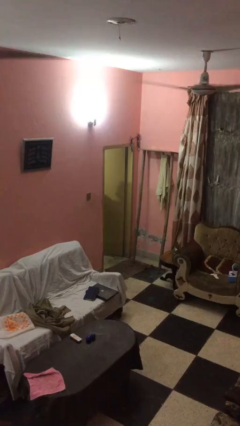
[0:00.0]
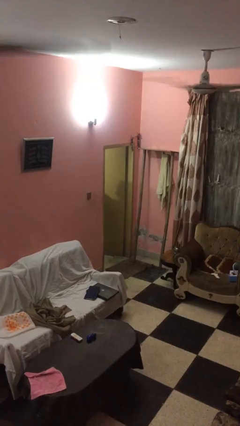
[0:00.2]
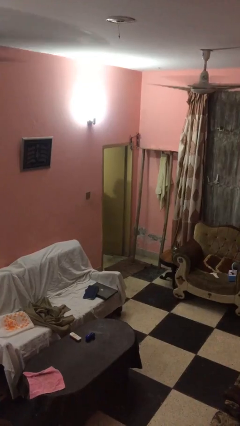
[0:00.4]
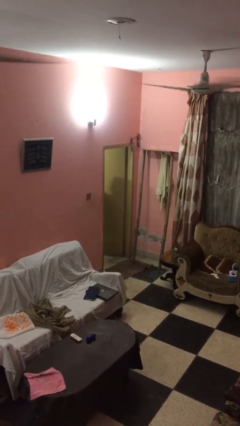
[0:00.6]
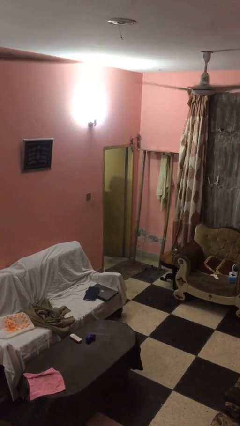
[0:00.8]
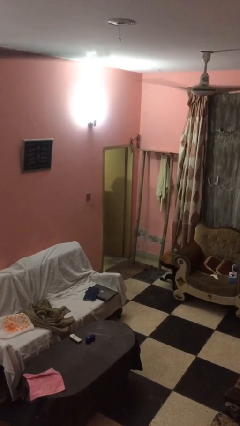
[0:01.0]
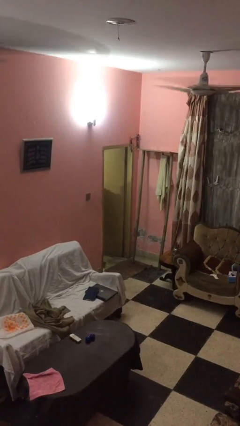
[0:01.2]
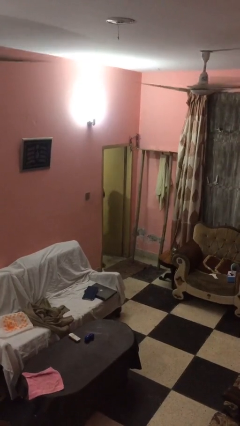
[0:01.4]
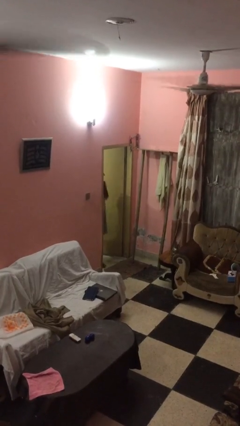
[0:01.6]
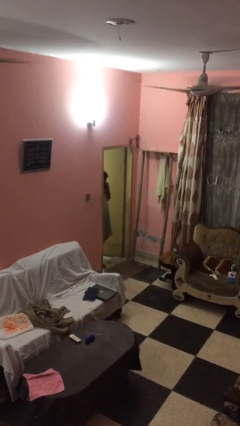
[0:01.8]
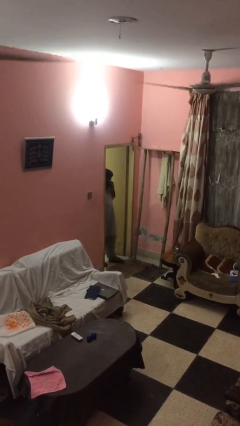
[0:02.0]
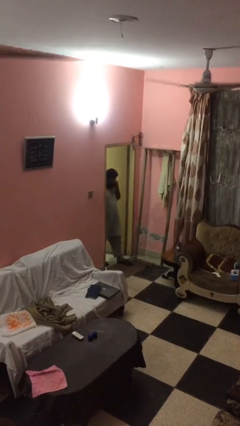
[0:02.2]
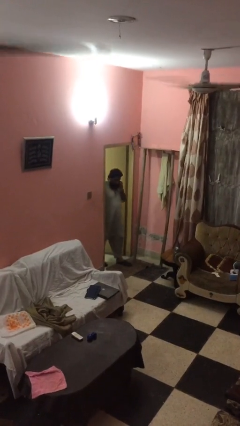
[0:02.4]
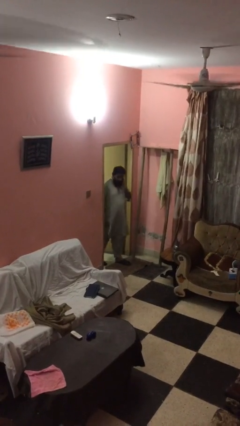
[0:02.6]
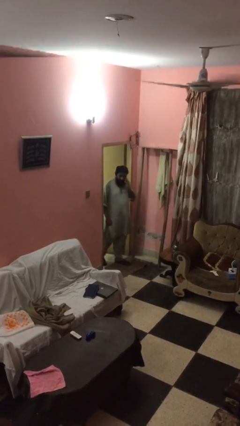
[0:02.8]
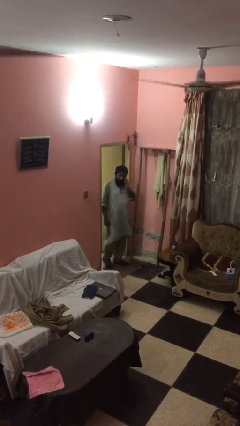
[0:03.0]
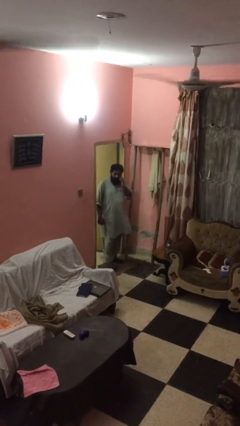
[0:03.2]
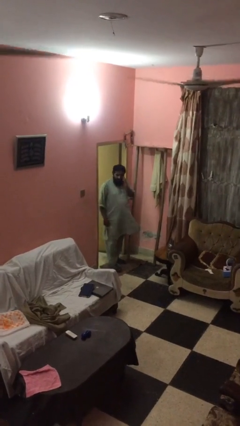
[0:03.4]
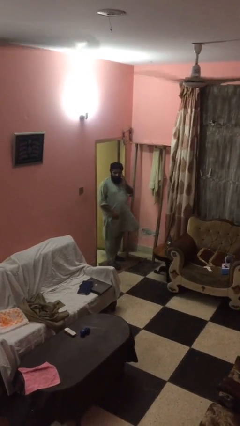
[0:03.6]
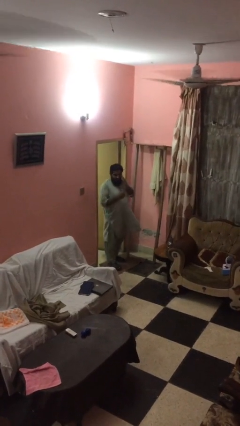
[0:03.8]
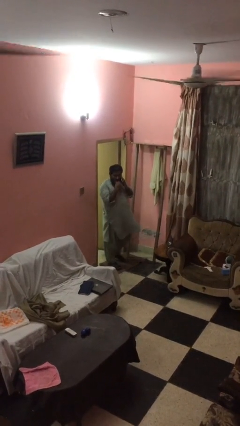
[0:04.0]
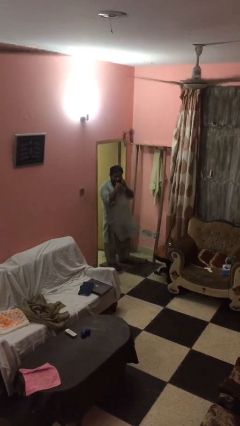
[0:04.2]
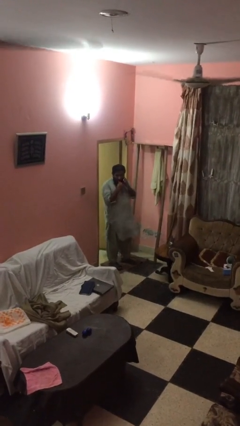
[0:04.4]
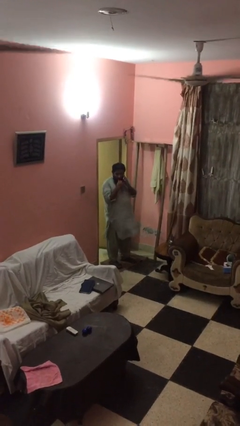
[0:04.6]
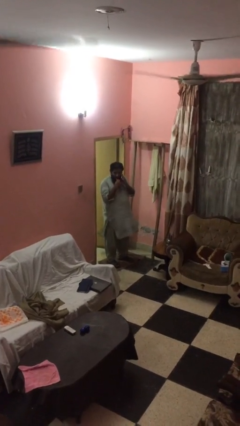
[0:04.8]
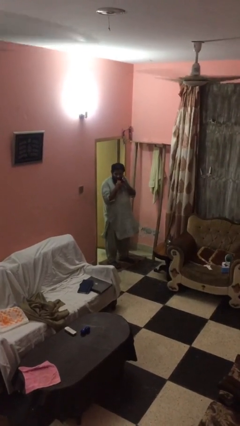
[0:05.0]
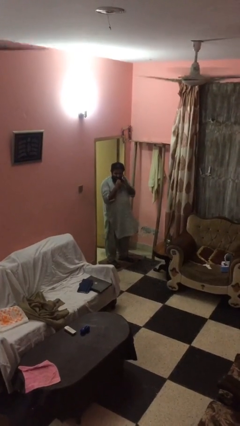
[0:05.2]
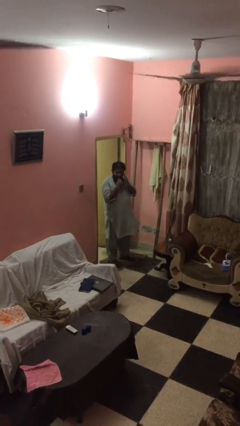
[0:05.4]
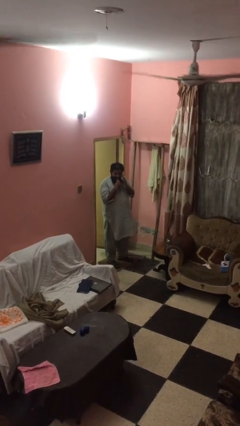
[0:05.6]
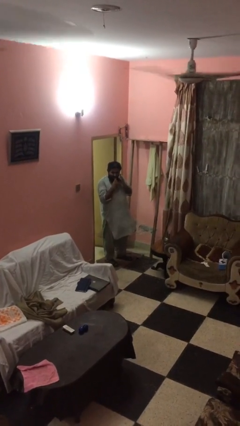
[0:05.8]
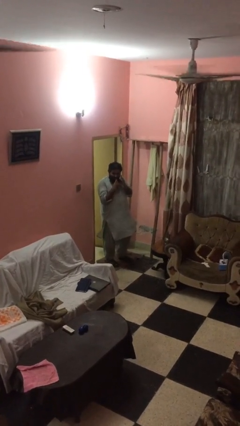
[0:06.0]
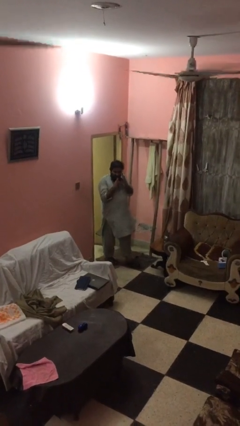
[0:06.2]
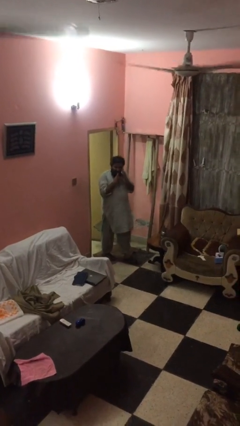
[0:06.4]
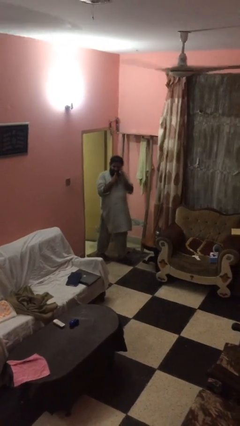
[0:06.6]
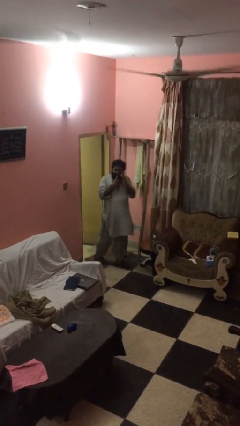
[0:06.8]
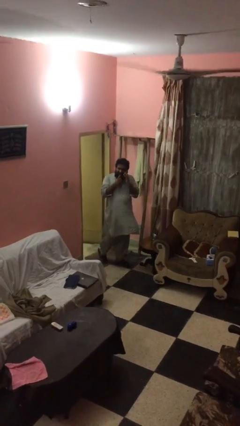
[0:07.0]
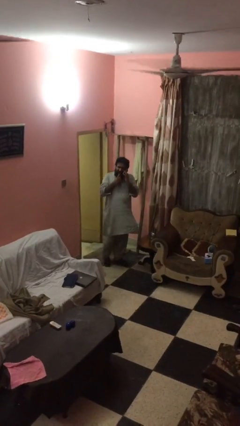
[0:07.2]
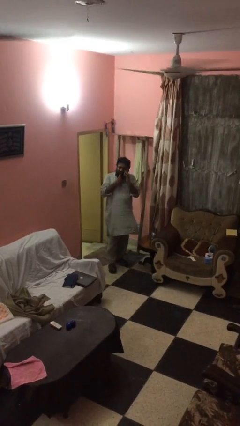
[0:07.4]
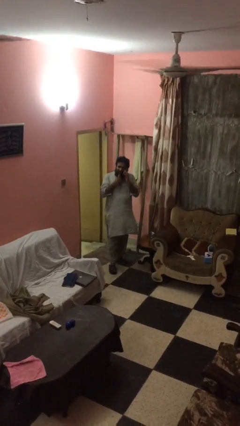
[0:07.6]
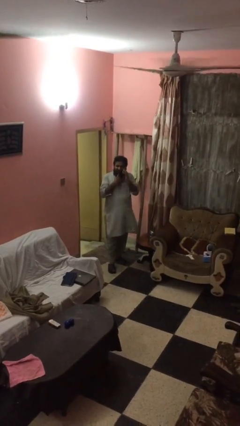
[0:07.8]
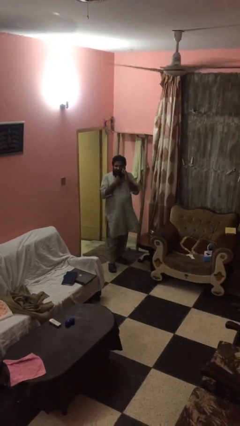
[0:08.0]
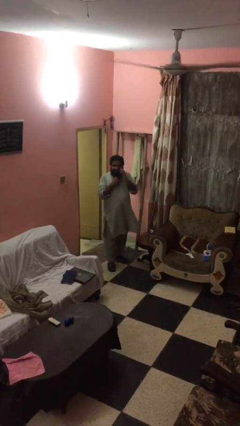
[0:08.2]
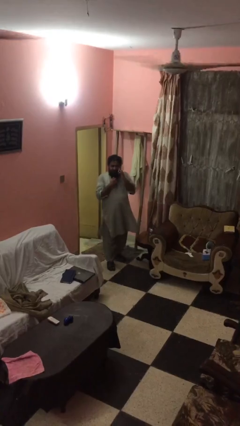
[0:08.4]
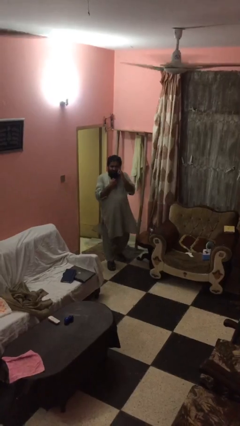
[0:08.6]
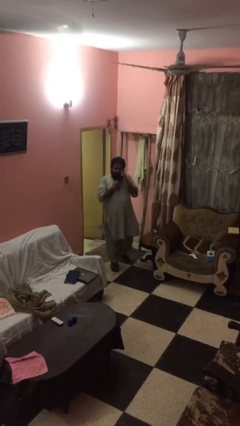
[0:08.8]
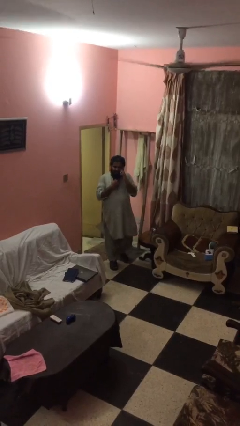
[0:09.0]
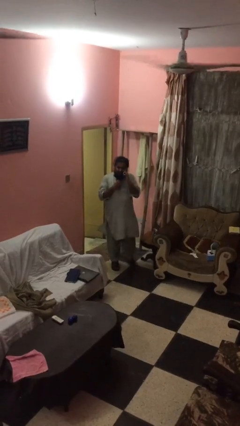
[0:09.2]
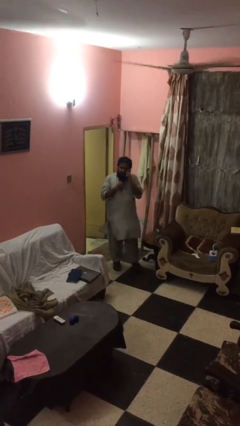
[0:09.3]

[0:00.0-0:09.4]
person enters scene through structure

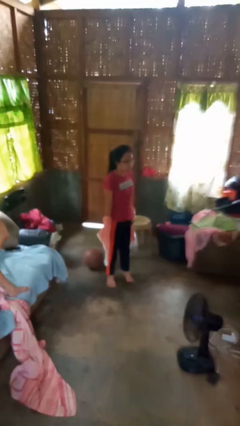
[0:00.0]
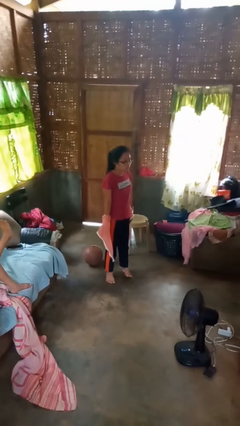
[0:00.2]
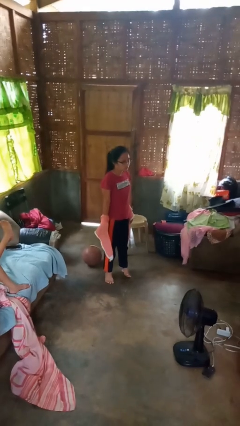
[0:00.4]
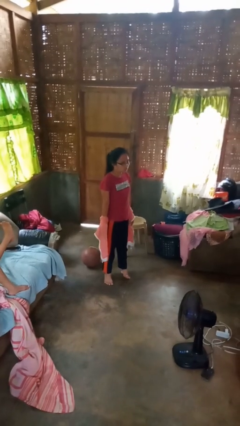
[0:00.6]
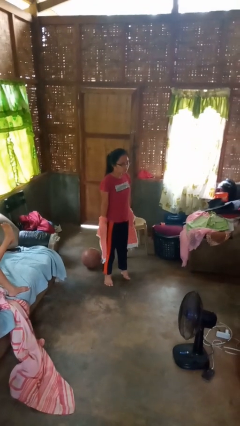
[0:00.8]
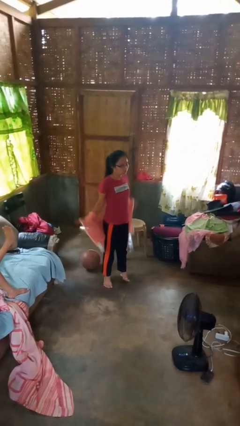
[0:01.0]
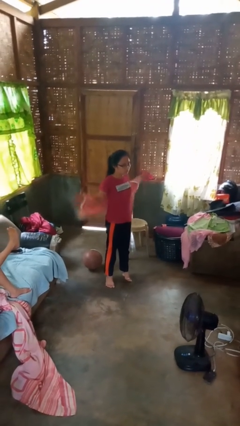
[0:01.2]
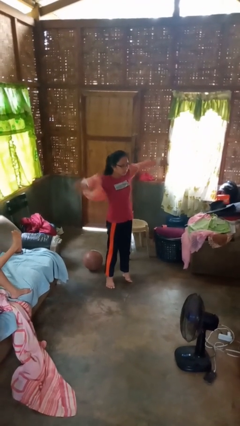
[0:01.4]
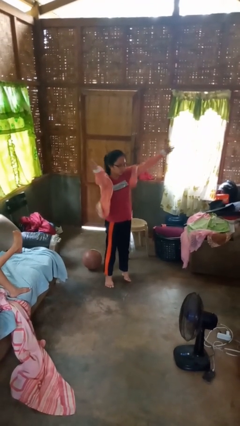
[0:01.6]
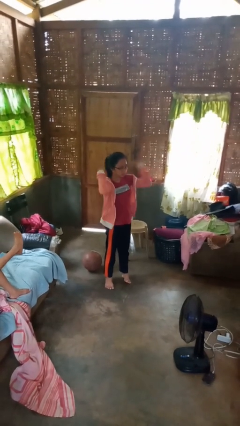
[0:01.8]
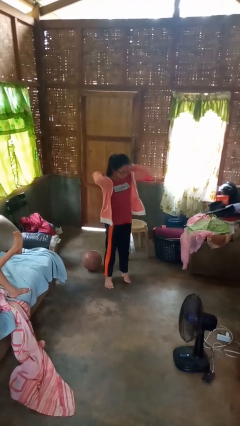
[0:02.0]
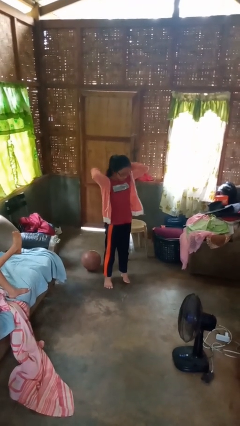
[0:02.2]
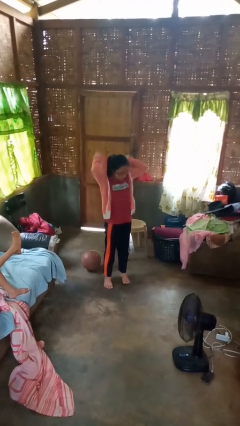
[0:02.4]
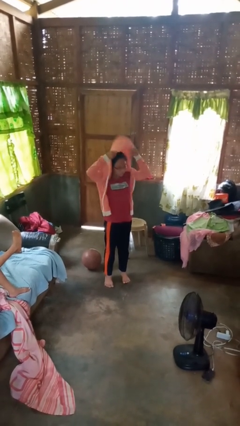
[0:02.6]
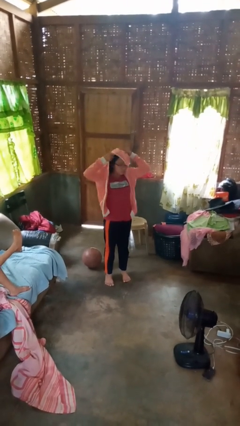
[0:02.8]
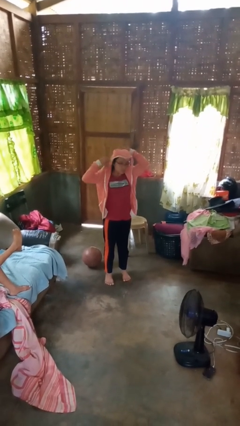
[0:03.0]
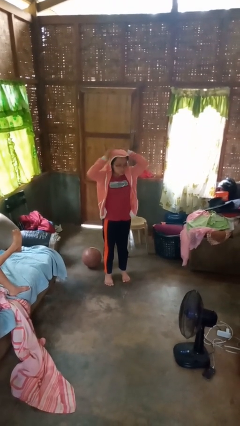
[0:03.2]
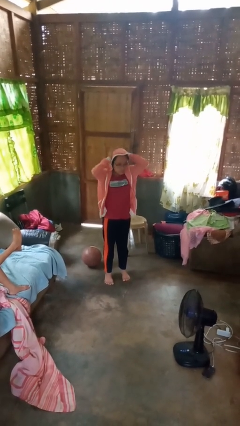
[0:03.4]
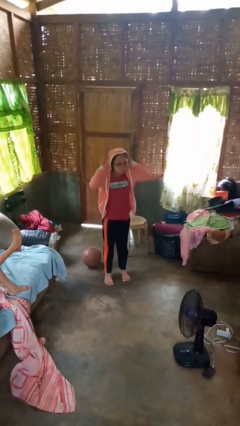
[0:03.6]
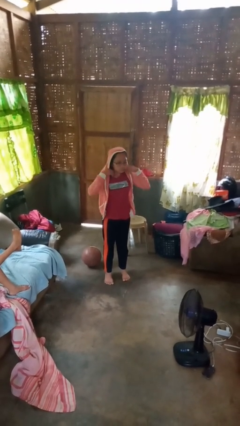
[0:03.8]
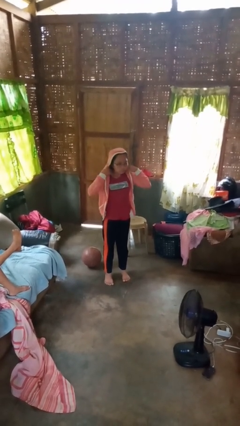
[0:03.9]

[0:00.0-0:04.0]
person puts on hoodie

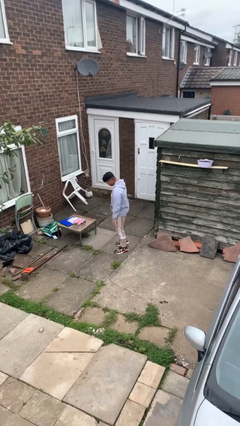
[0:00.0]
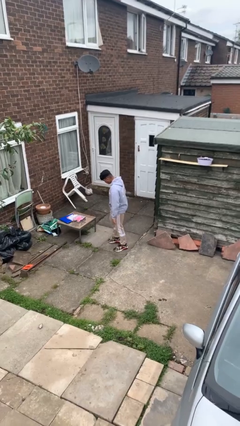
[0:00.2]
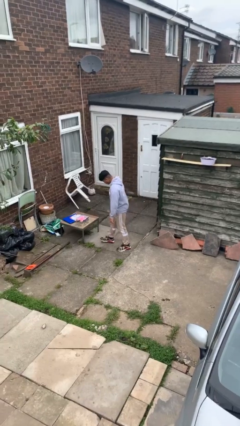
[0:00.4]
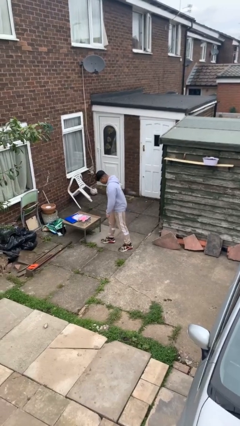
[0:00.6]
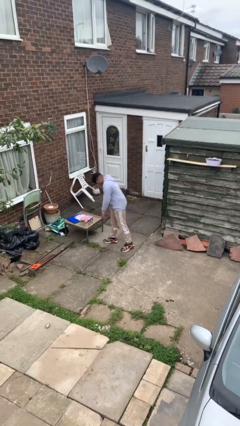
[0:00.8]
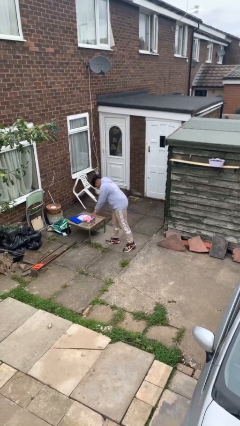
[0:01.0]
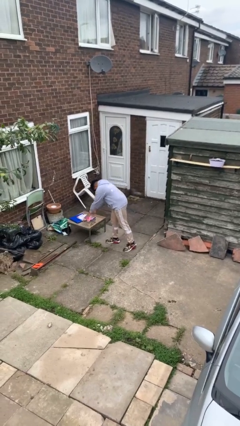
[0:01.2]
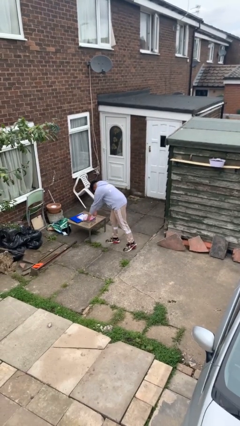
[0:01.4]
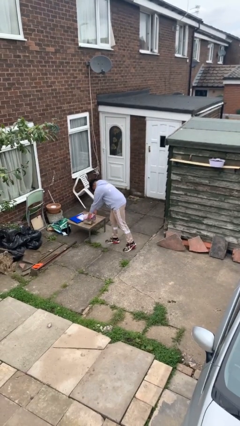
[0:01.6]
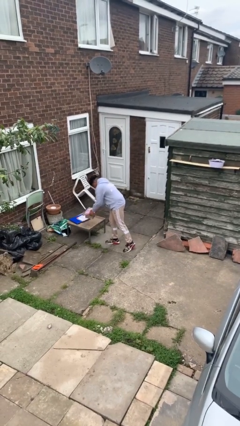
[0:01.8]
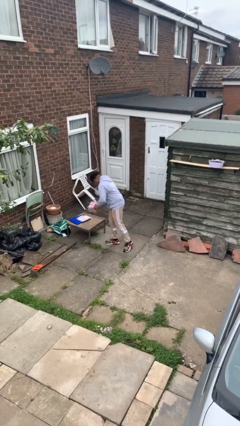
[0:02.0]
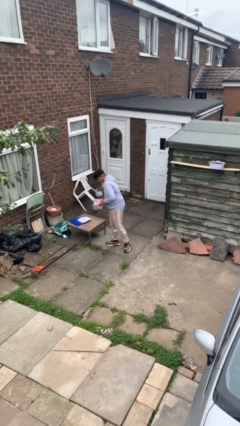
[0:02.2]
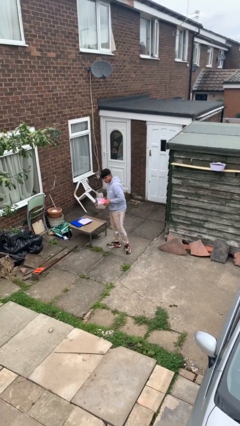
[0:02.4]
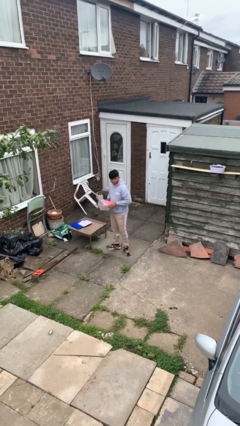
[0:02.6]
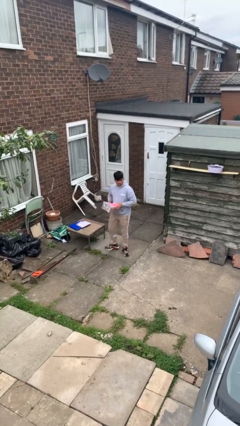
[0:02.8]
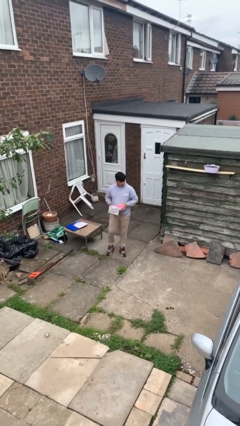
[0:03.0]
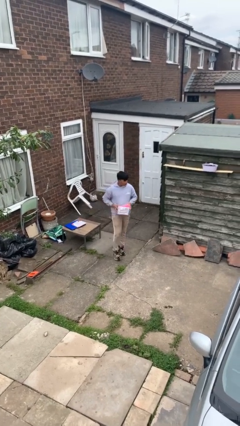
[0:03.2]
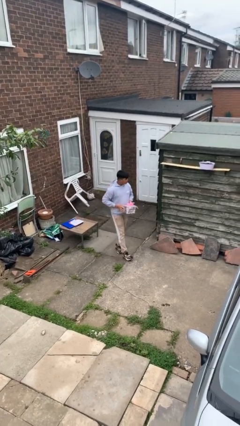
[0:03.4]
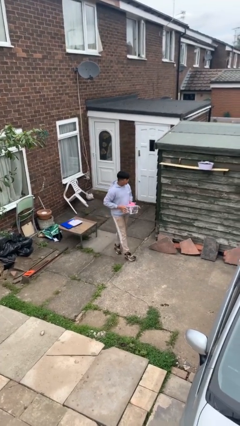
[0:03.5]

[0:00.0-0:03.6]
person picks up object from table

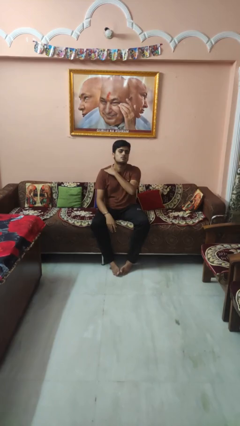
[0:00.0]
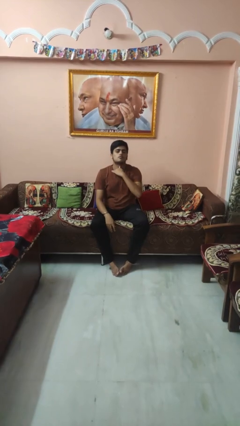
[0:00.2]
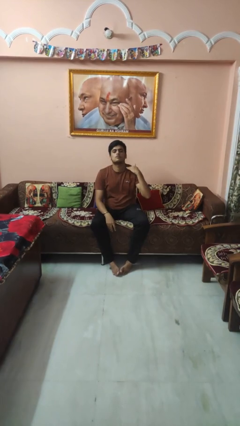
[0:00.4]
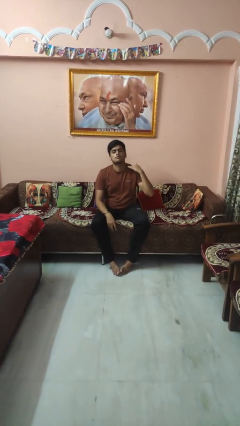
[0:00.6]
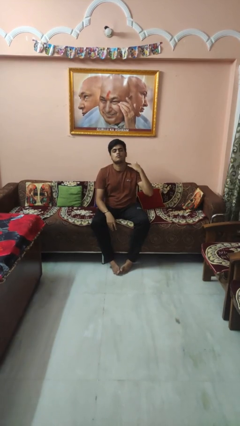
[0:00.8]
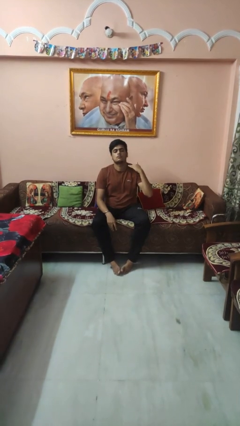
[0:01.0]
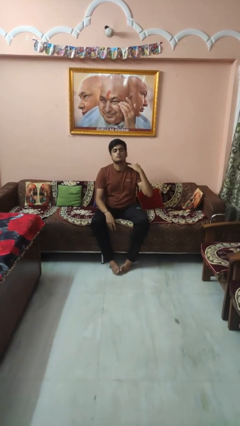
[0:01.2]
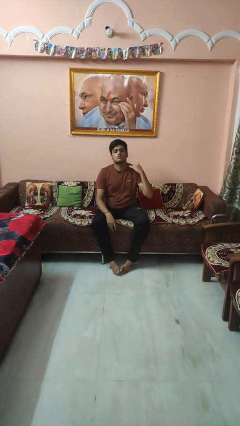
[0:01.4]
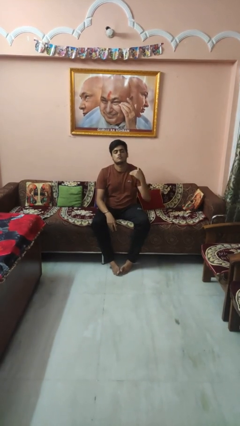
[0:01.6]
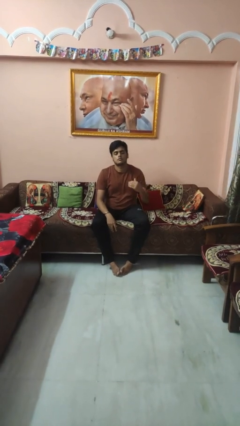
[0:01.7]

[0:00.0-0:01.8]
person gestures cut
